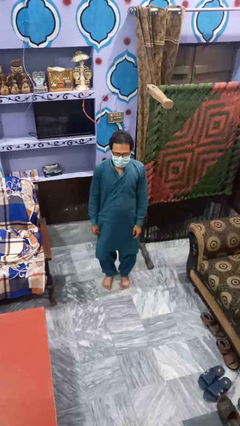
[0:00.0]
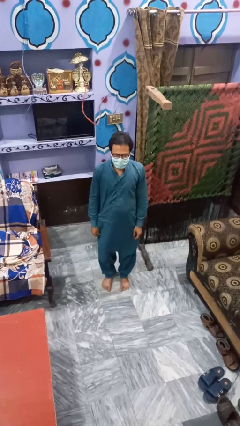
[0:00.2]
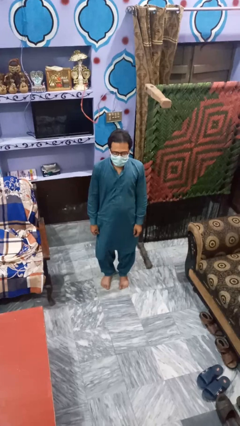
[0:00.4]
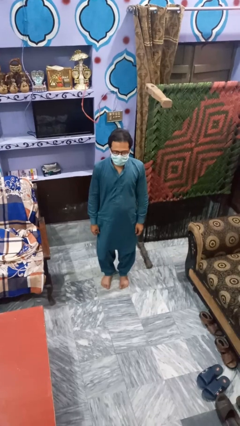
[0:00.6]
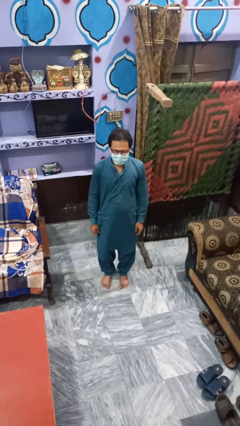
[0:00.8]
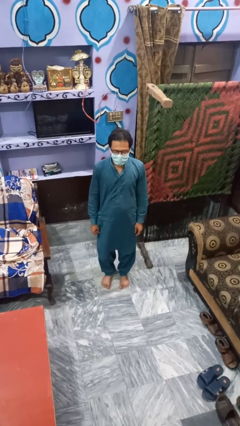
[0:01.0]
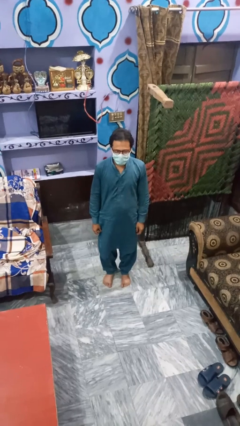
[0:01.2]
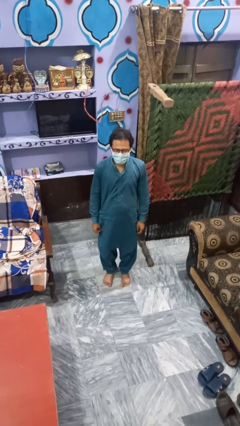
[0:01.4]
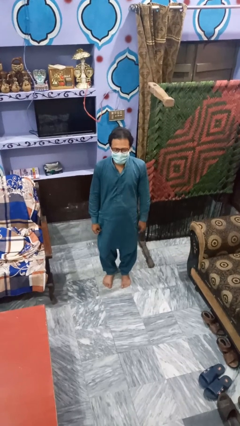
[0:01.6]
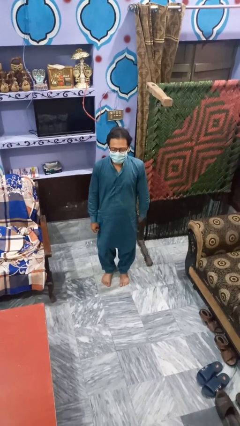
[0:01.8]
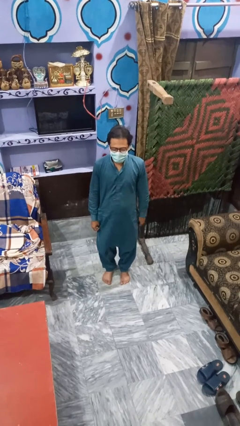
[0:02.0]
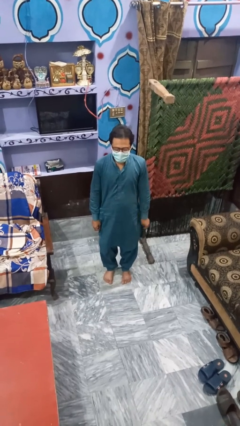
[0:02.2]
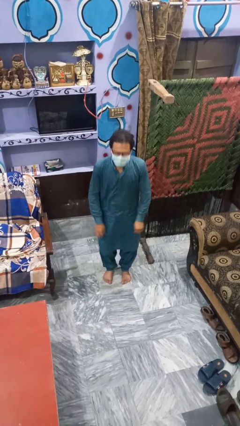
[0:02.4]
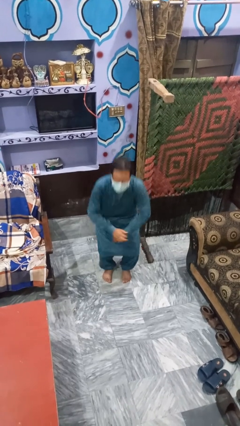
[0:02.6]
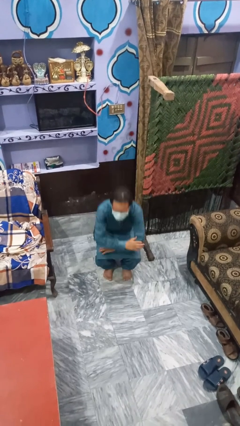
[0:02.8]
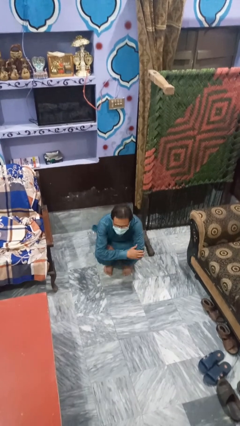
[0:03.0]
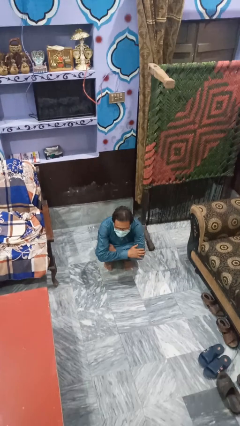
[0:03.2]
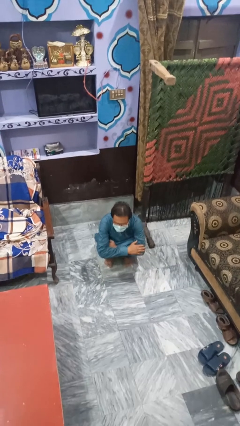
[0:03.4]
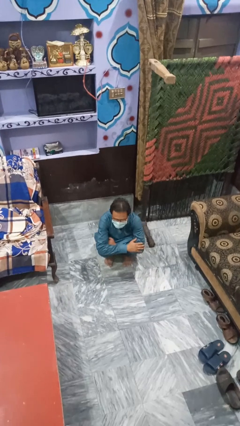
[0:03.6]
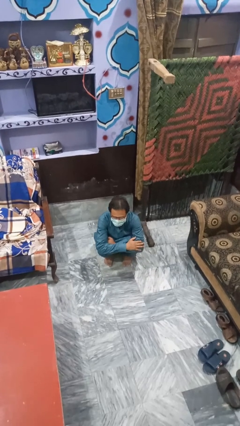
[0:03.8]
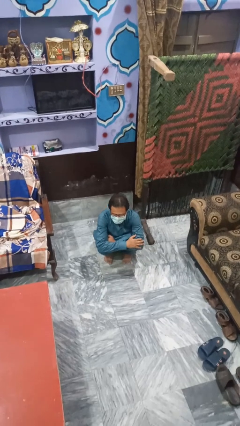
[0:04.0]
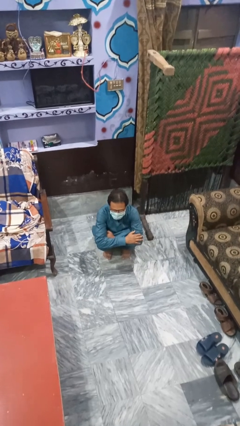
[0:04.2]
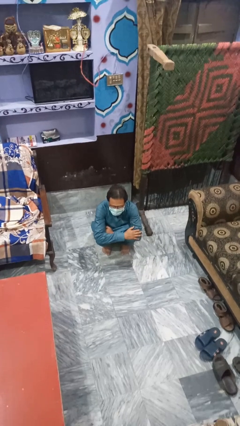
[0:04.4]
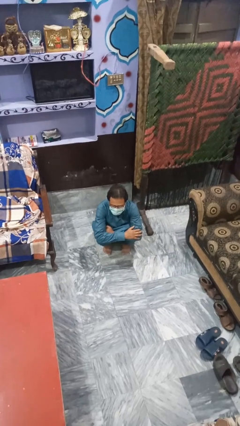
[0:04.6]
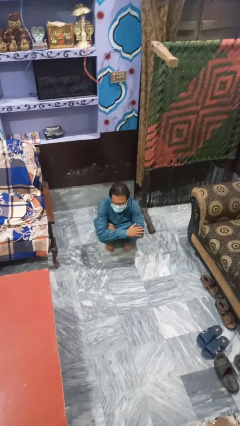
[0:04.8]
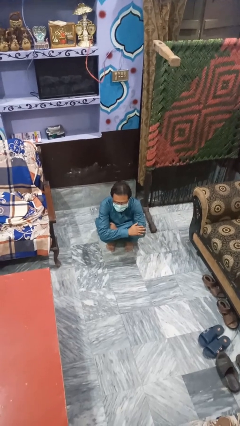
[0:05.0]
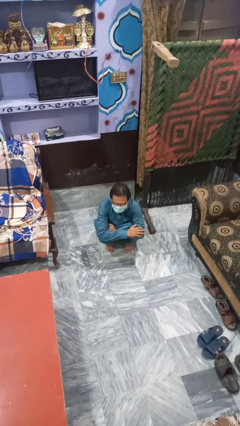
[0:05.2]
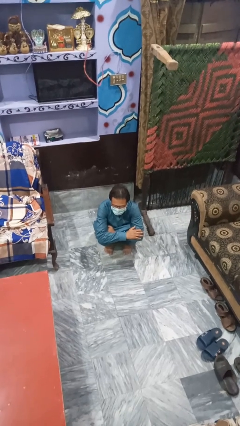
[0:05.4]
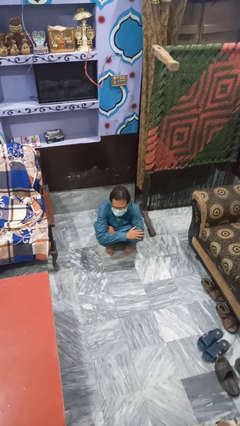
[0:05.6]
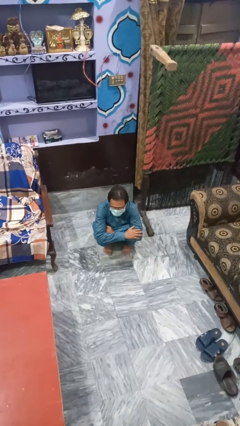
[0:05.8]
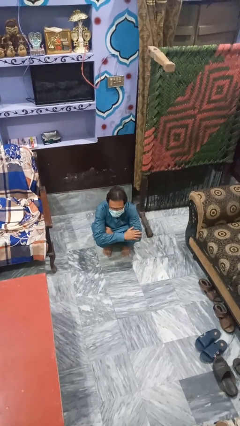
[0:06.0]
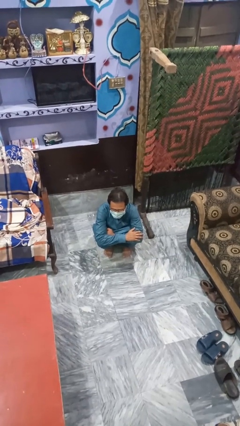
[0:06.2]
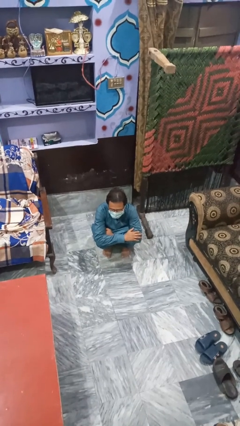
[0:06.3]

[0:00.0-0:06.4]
person squats

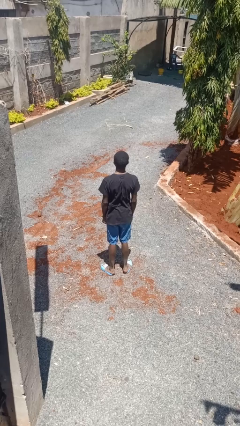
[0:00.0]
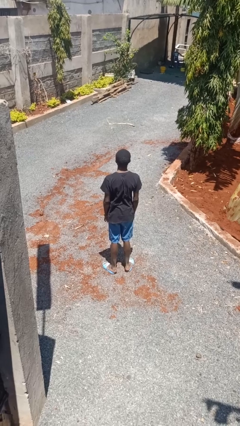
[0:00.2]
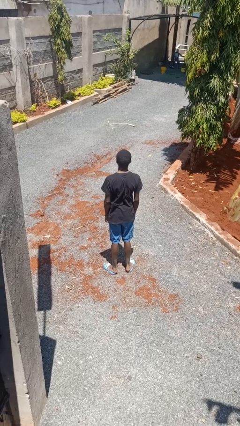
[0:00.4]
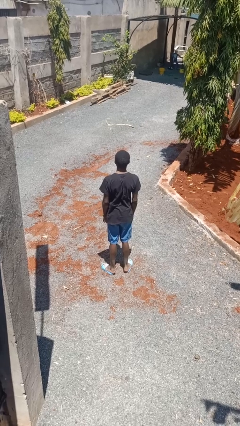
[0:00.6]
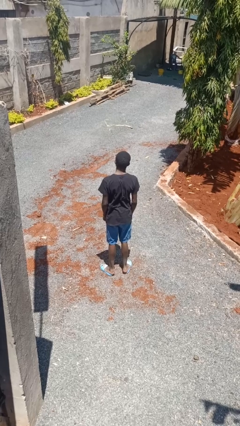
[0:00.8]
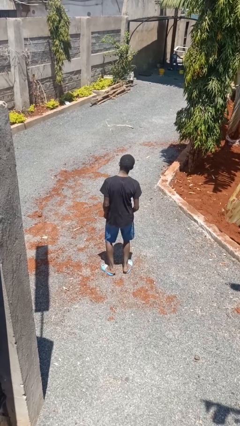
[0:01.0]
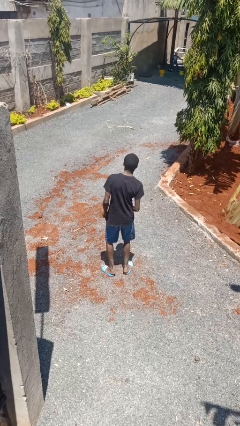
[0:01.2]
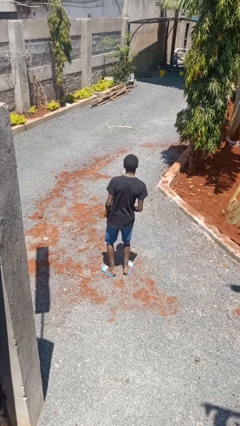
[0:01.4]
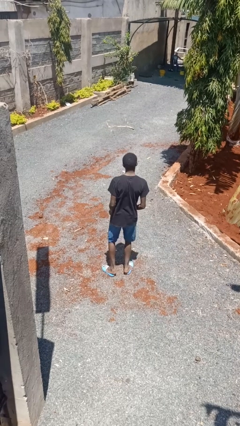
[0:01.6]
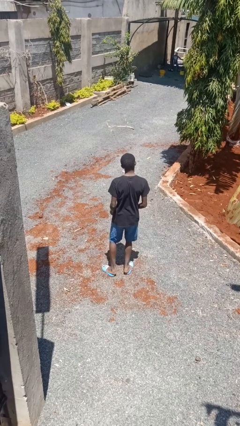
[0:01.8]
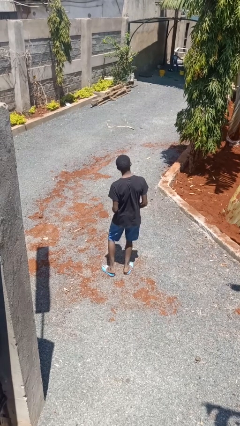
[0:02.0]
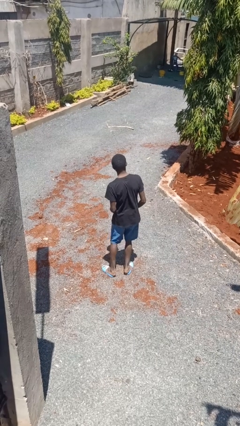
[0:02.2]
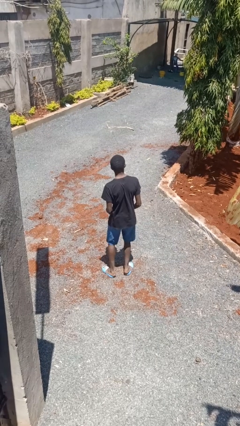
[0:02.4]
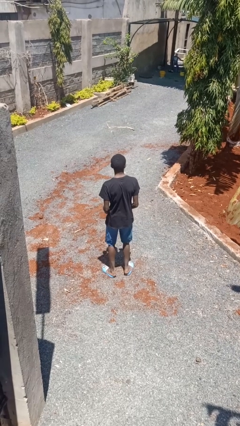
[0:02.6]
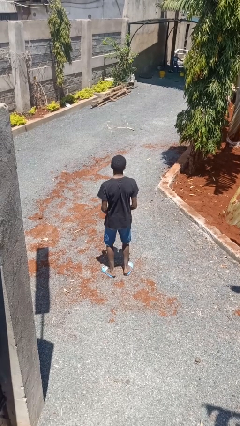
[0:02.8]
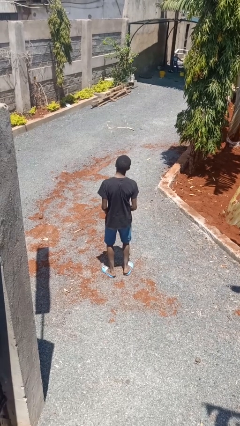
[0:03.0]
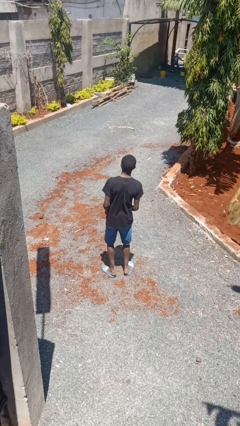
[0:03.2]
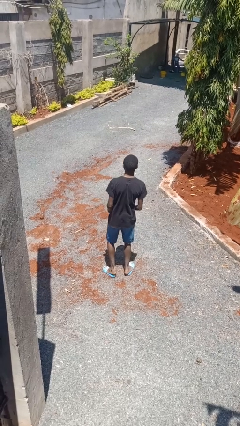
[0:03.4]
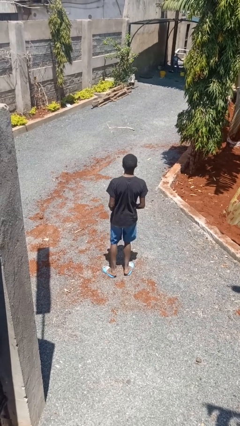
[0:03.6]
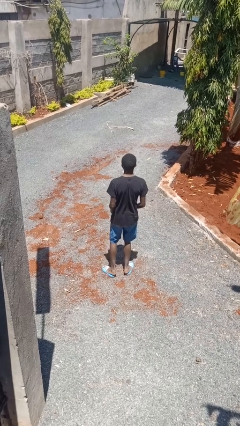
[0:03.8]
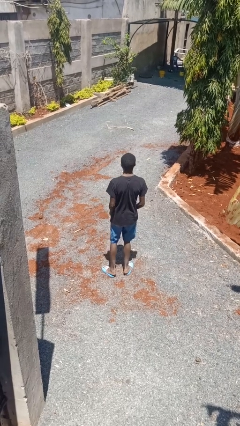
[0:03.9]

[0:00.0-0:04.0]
person dances in place

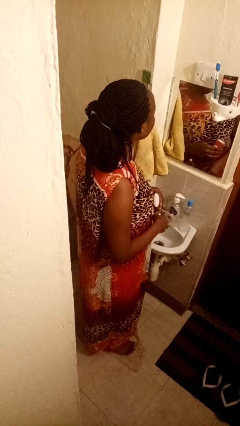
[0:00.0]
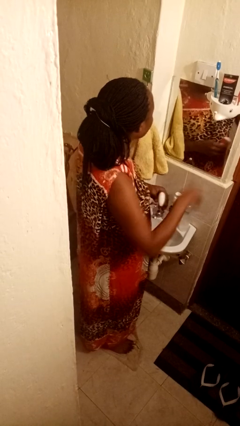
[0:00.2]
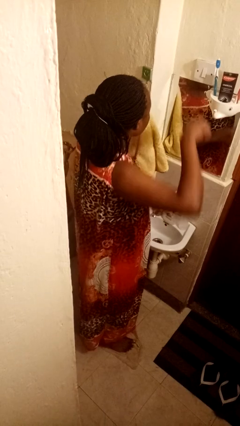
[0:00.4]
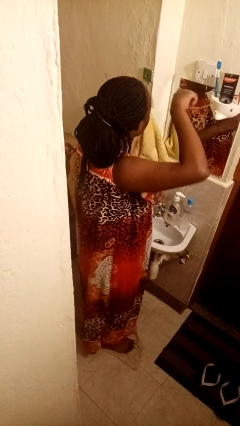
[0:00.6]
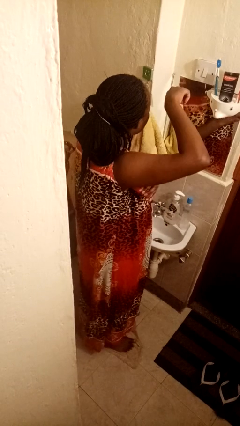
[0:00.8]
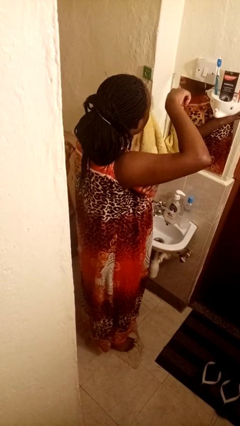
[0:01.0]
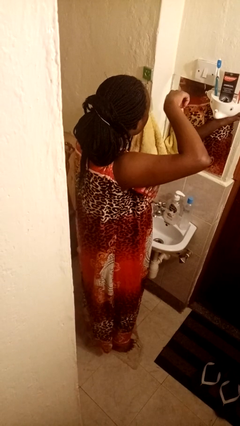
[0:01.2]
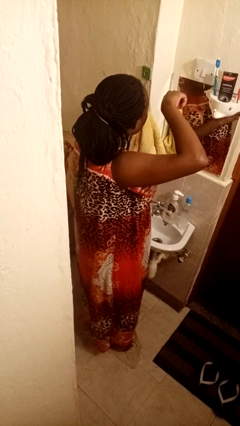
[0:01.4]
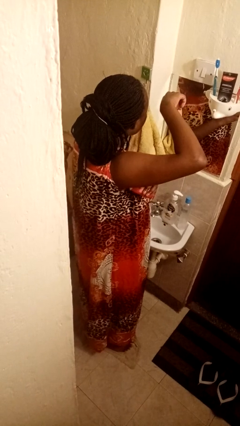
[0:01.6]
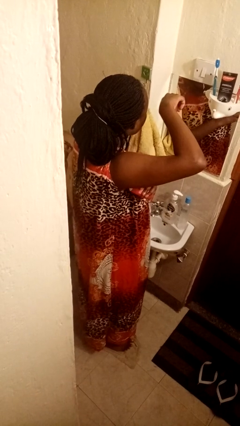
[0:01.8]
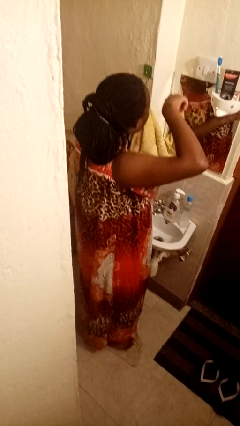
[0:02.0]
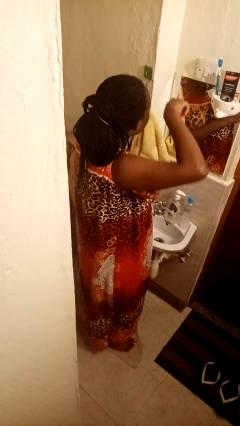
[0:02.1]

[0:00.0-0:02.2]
person applies deodorant

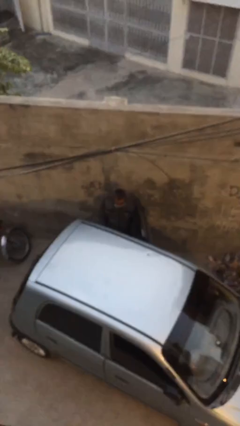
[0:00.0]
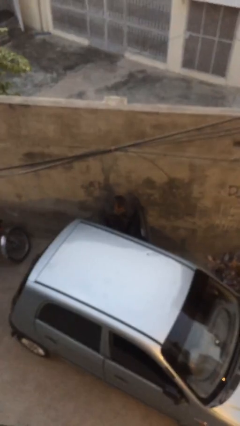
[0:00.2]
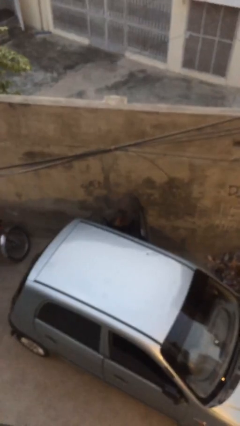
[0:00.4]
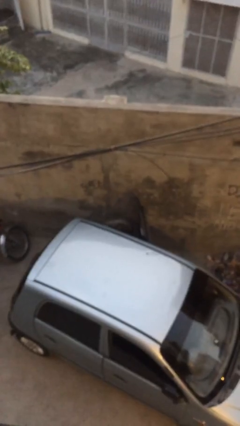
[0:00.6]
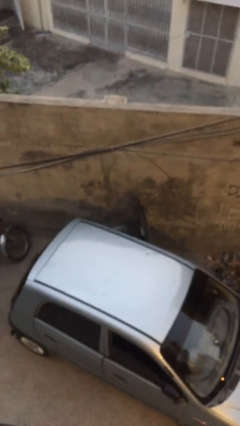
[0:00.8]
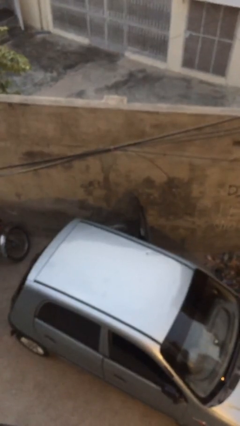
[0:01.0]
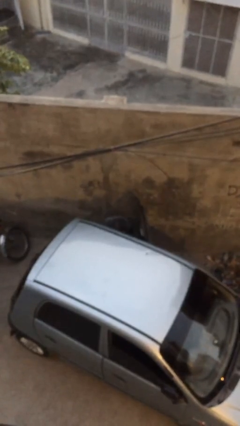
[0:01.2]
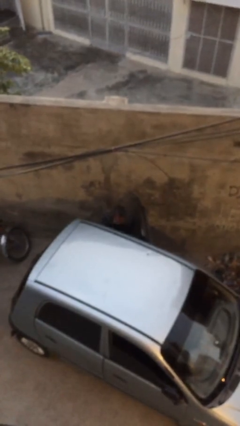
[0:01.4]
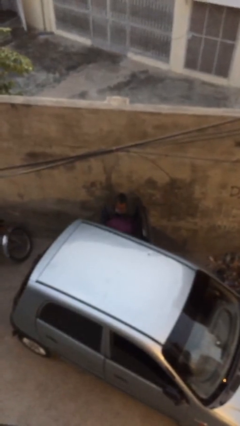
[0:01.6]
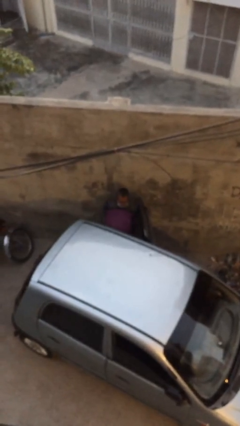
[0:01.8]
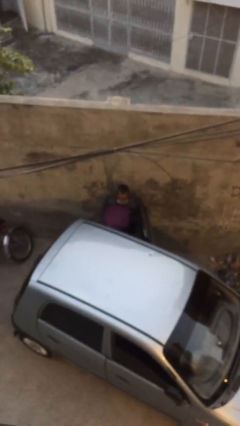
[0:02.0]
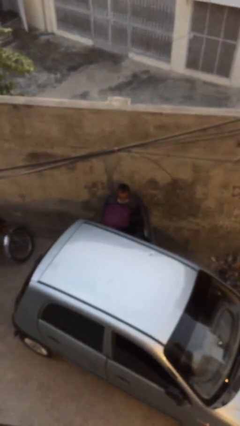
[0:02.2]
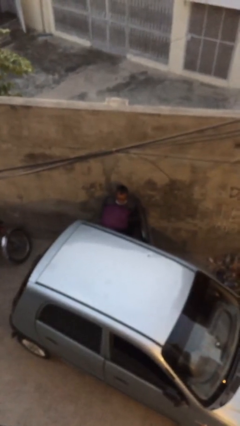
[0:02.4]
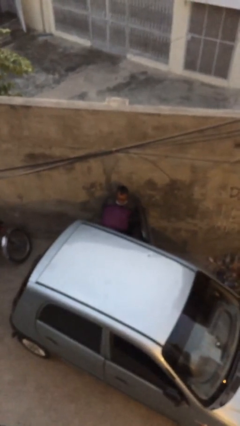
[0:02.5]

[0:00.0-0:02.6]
person unloads car

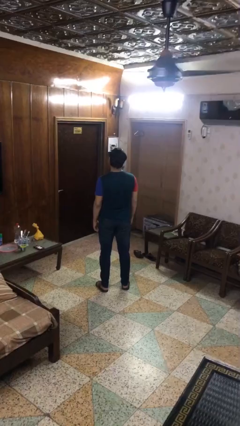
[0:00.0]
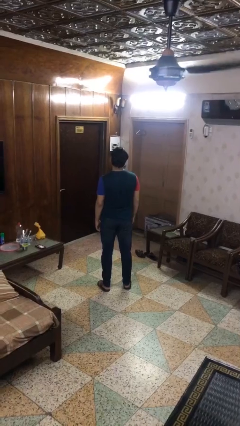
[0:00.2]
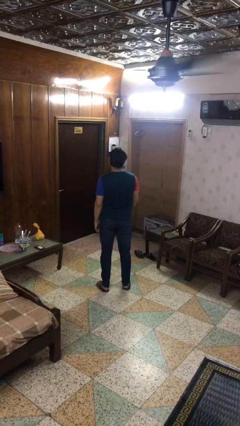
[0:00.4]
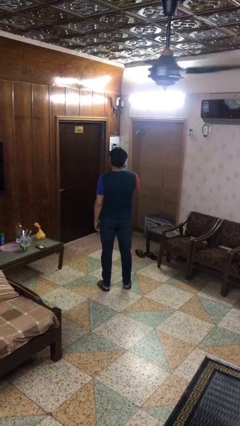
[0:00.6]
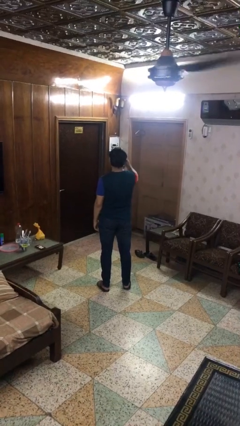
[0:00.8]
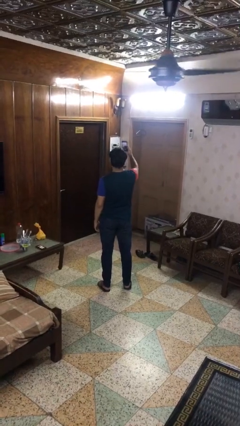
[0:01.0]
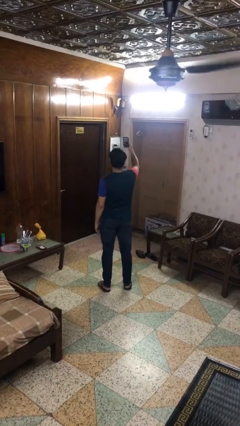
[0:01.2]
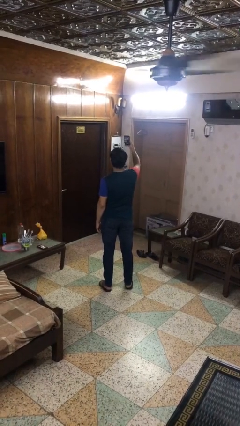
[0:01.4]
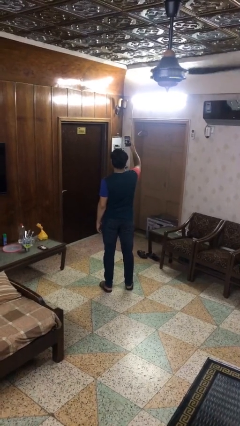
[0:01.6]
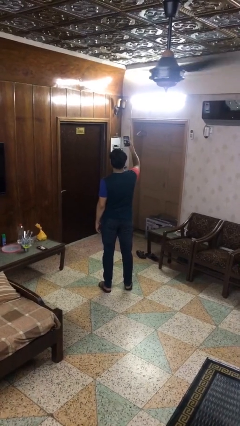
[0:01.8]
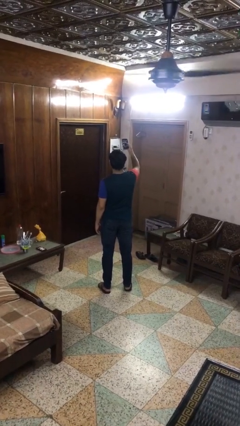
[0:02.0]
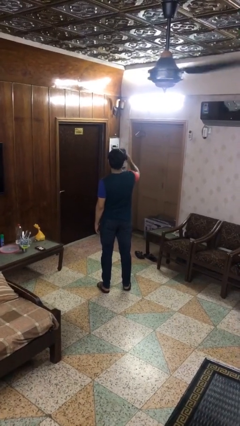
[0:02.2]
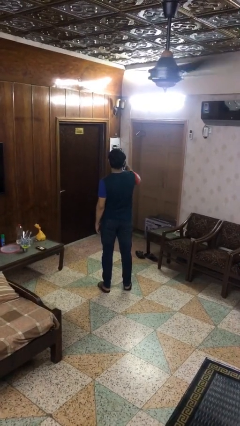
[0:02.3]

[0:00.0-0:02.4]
person takes selfie
